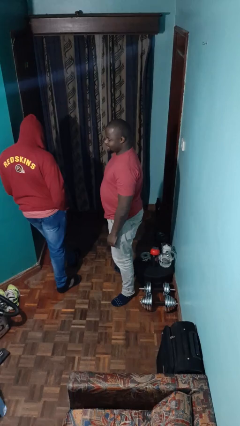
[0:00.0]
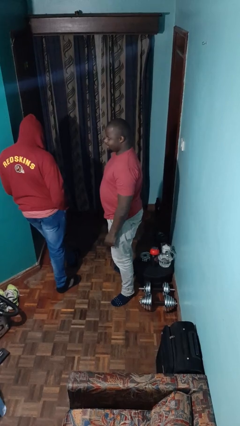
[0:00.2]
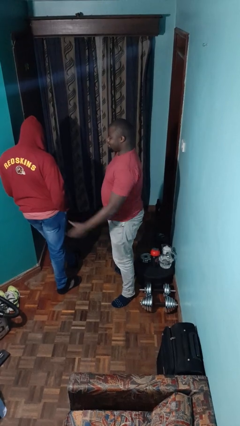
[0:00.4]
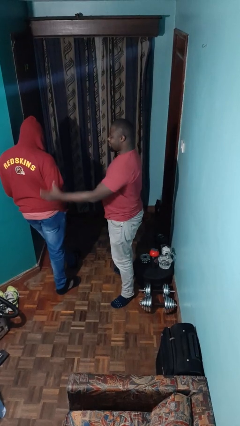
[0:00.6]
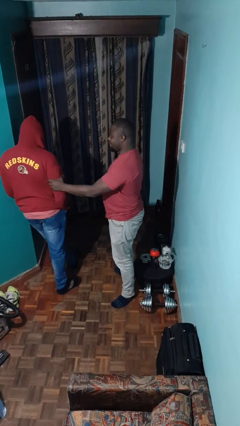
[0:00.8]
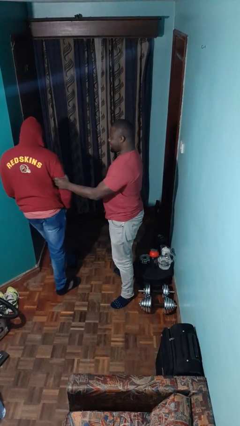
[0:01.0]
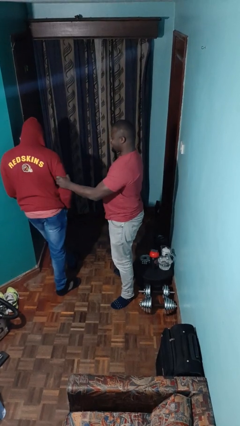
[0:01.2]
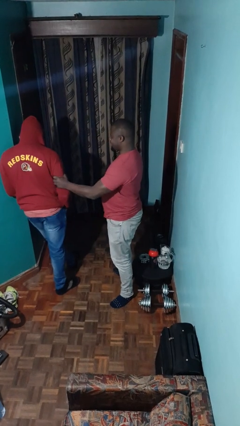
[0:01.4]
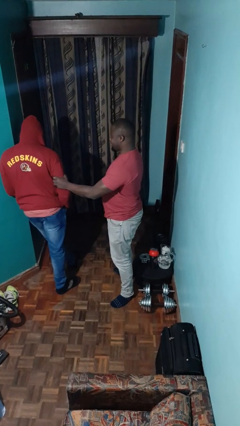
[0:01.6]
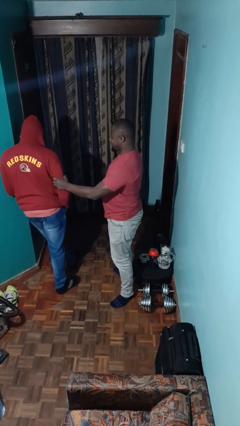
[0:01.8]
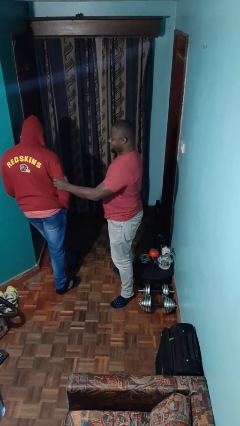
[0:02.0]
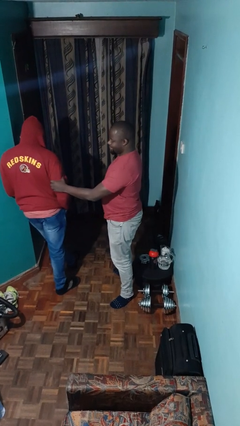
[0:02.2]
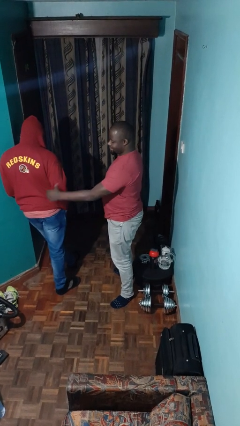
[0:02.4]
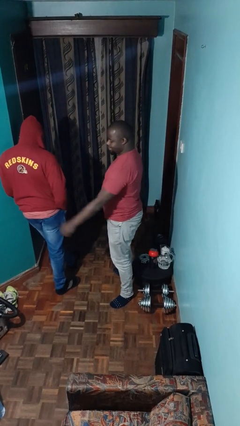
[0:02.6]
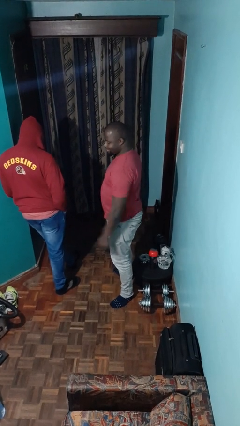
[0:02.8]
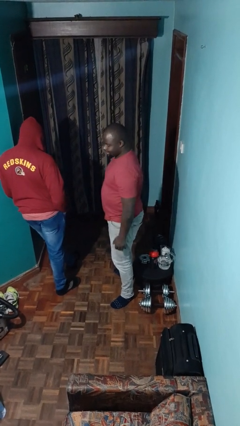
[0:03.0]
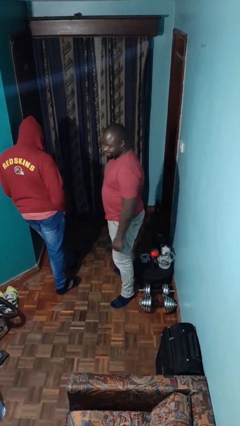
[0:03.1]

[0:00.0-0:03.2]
person grabs person by bicep

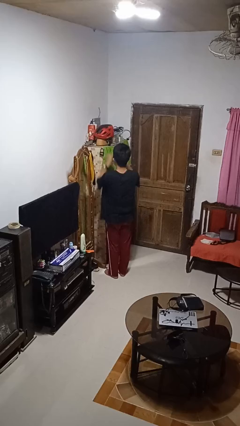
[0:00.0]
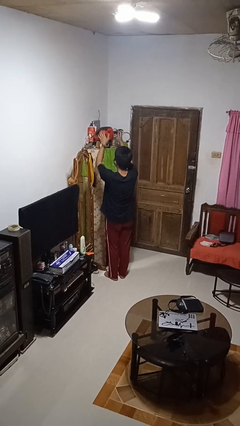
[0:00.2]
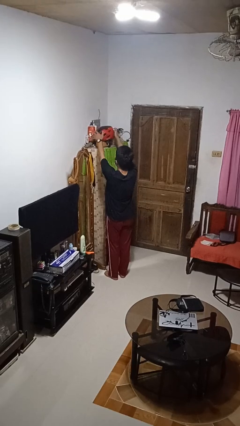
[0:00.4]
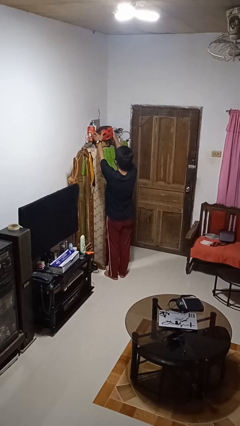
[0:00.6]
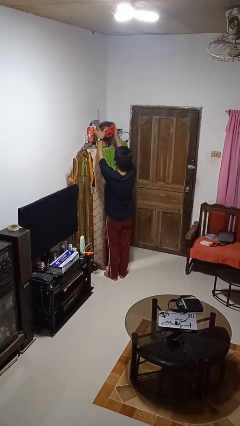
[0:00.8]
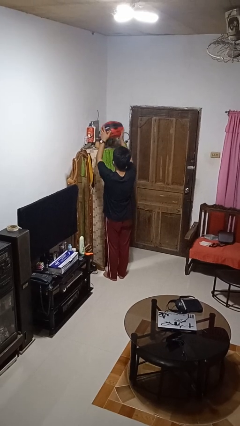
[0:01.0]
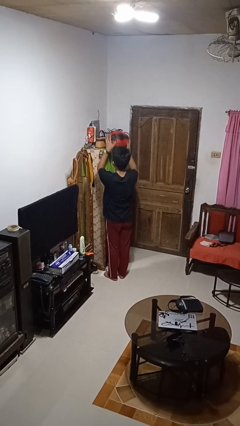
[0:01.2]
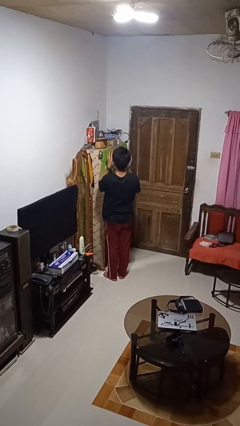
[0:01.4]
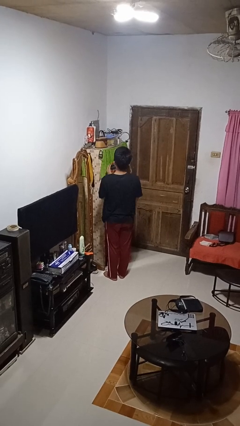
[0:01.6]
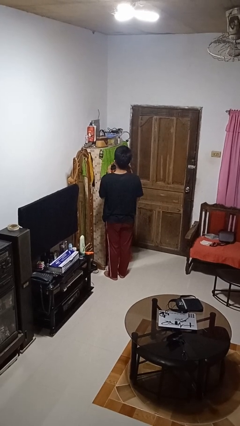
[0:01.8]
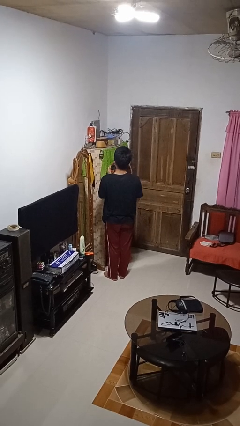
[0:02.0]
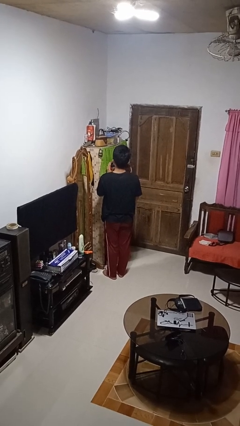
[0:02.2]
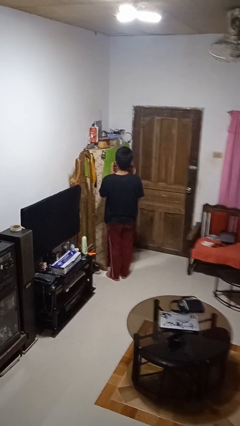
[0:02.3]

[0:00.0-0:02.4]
person picks up object from shelf

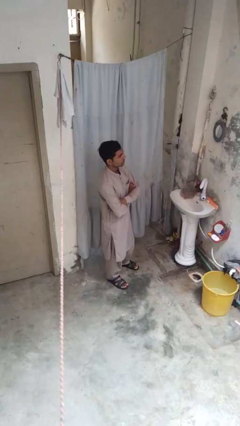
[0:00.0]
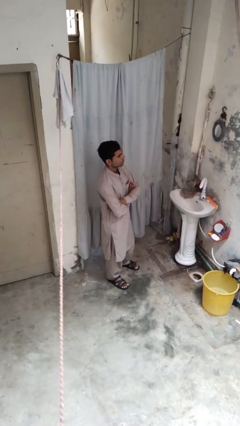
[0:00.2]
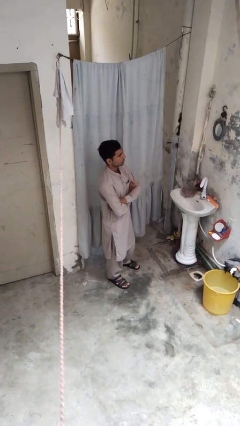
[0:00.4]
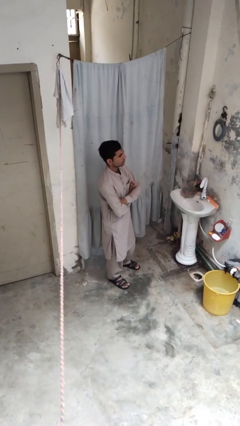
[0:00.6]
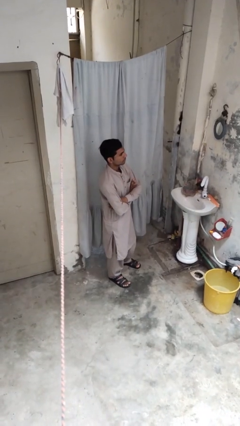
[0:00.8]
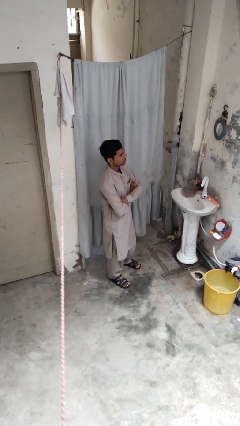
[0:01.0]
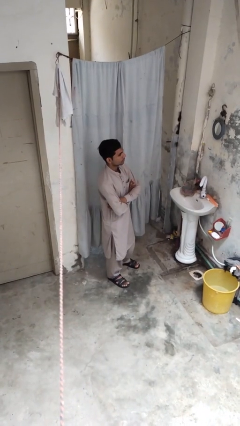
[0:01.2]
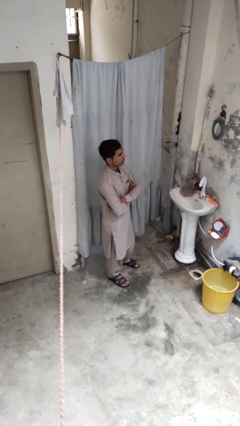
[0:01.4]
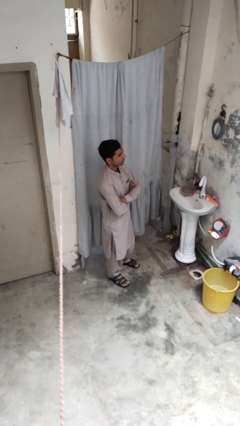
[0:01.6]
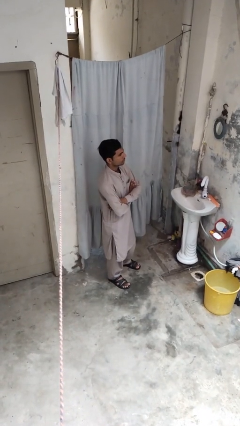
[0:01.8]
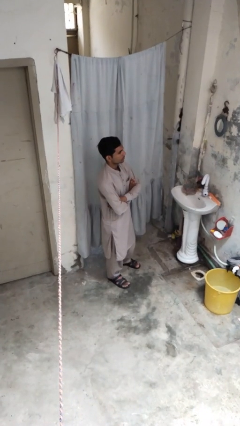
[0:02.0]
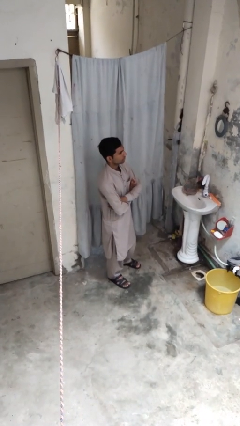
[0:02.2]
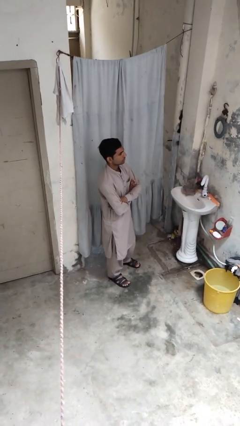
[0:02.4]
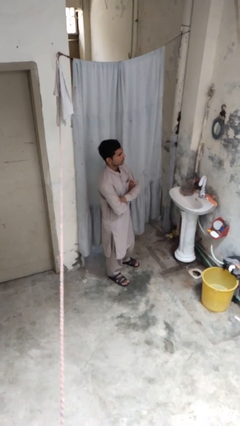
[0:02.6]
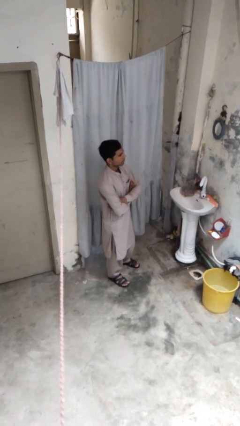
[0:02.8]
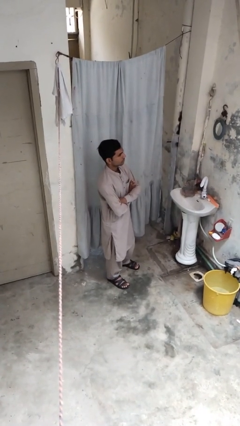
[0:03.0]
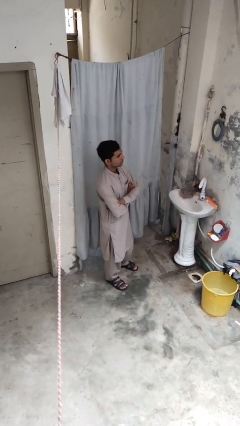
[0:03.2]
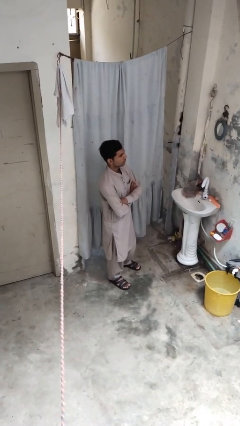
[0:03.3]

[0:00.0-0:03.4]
person crosses arms

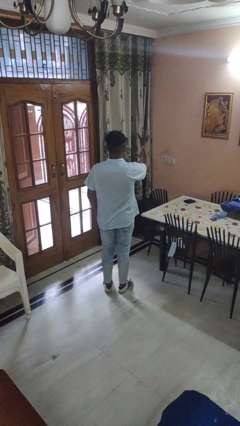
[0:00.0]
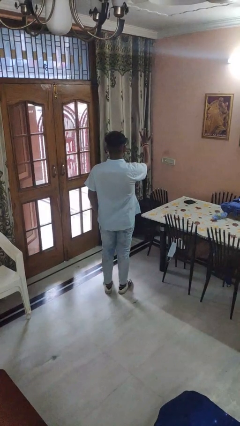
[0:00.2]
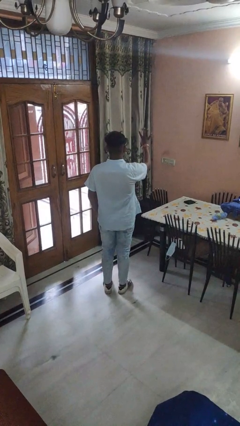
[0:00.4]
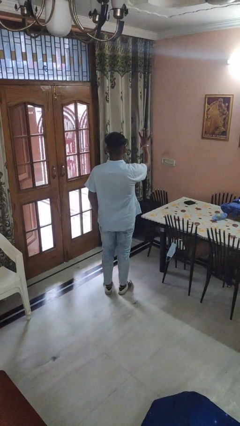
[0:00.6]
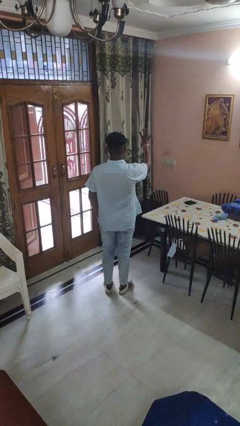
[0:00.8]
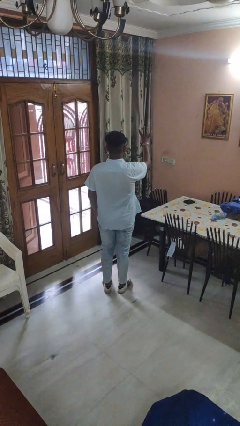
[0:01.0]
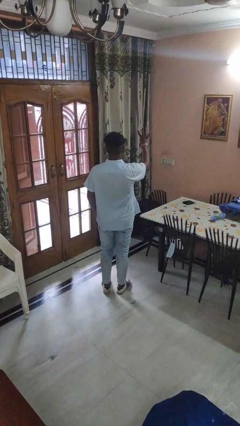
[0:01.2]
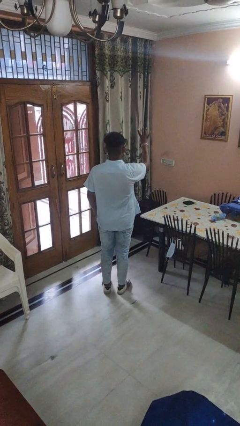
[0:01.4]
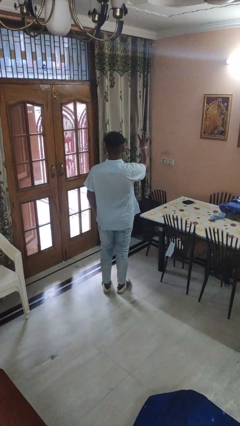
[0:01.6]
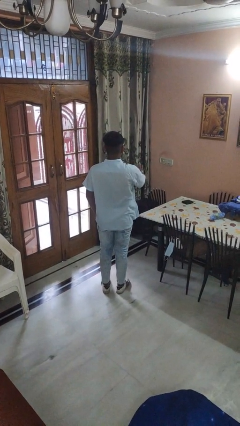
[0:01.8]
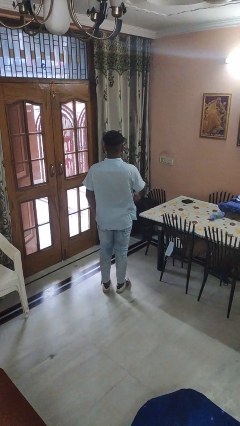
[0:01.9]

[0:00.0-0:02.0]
person gestures number four

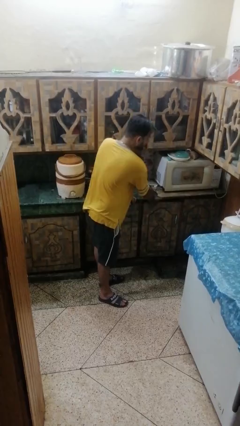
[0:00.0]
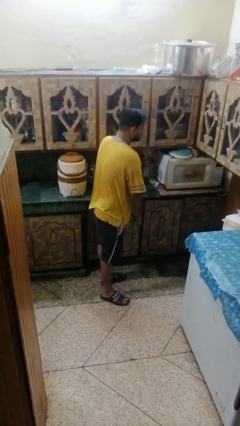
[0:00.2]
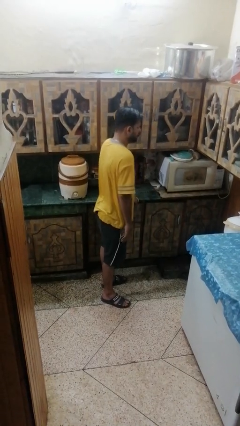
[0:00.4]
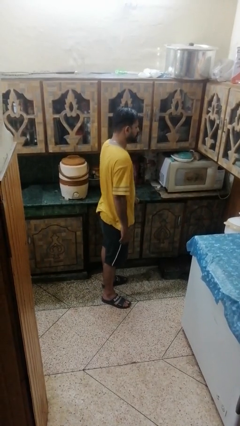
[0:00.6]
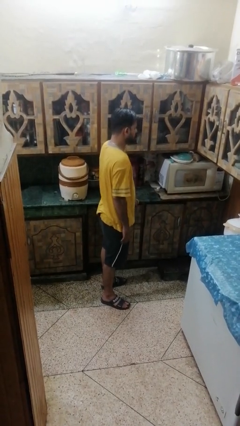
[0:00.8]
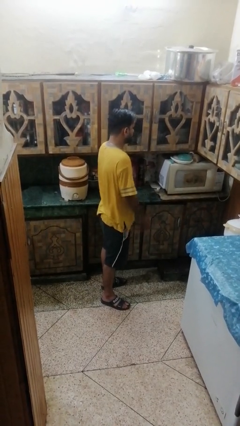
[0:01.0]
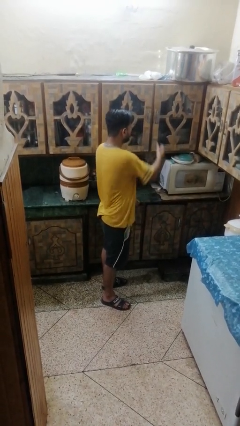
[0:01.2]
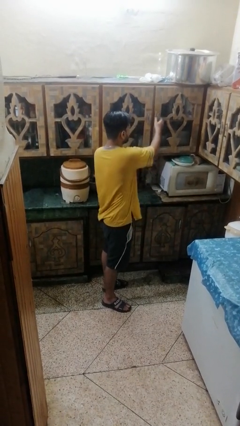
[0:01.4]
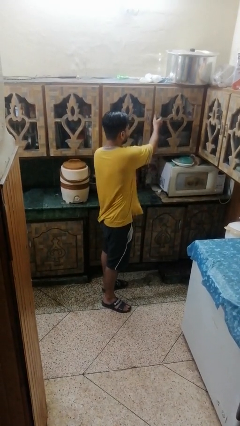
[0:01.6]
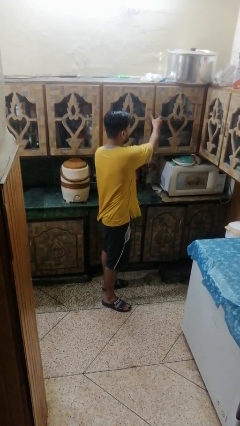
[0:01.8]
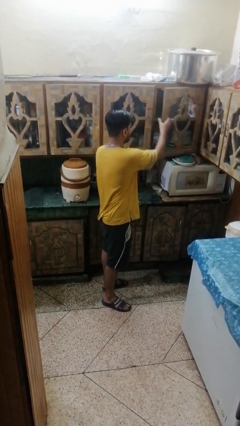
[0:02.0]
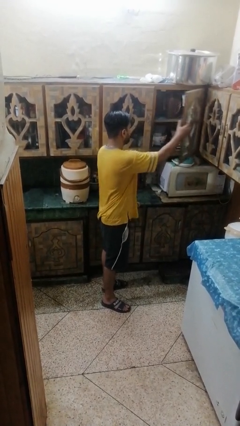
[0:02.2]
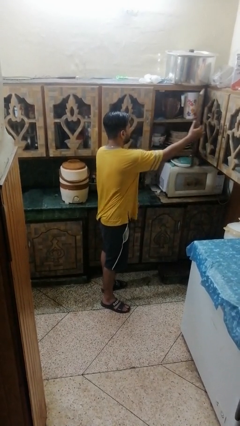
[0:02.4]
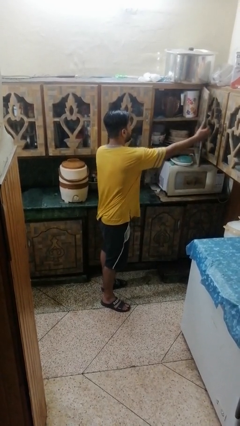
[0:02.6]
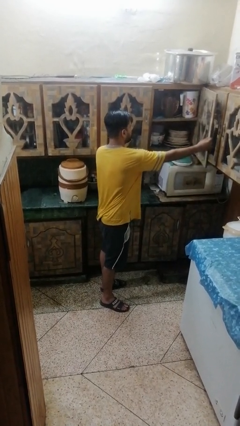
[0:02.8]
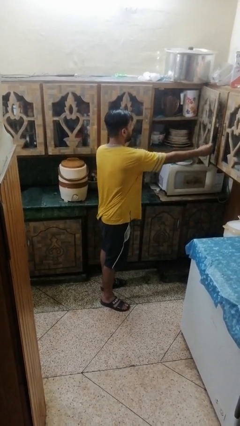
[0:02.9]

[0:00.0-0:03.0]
person closes cabinet

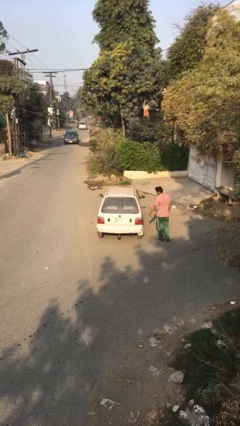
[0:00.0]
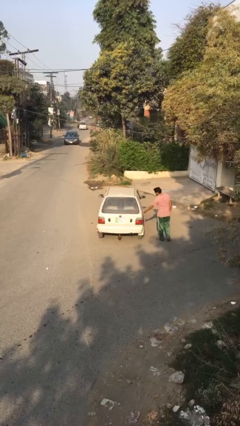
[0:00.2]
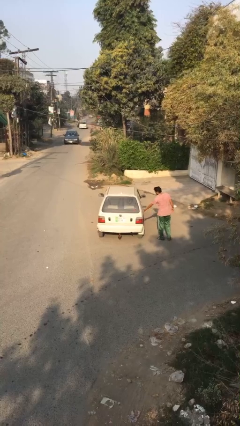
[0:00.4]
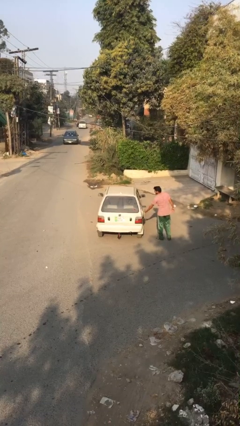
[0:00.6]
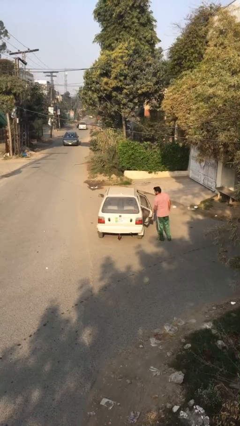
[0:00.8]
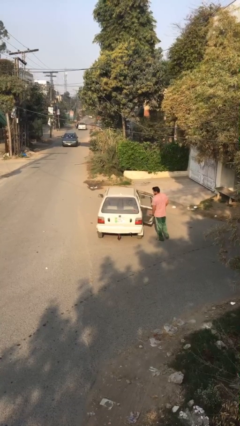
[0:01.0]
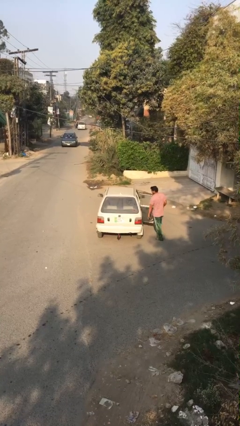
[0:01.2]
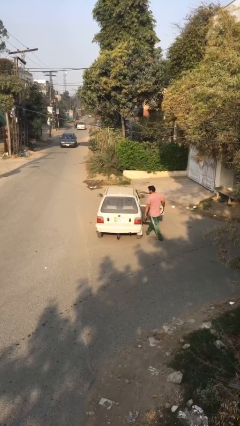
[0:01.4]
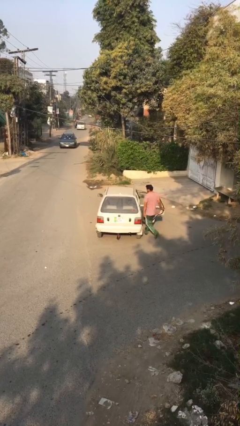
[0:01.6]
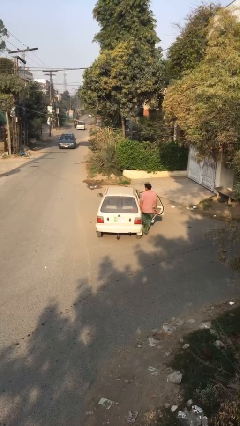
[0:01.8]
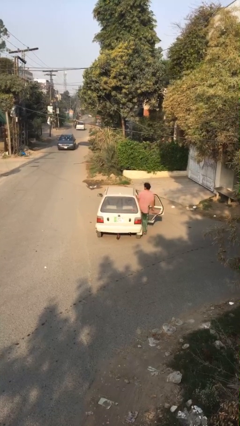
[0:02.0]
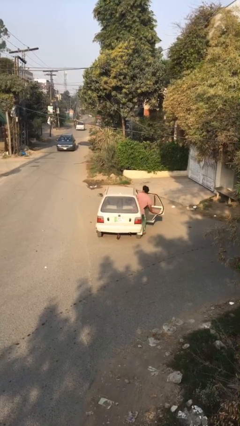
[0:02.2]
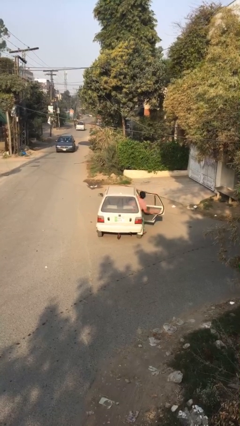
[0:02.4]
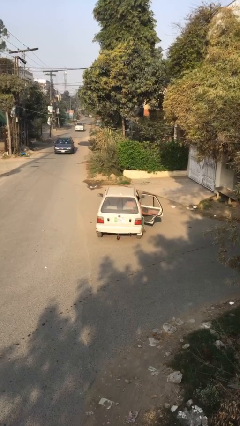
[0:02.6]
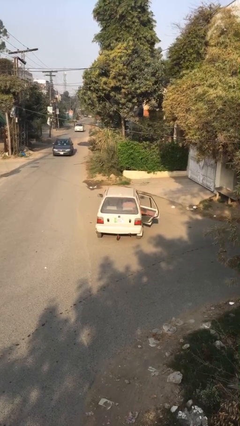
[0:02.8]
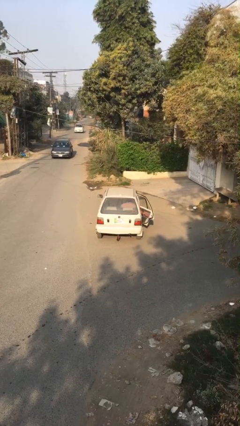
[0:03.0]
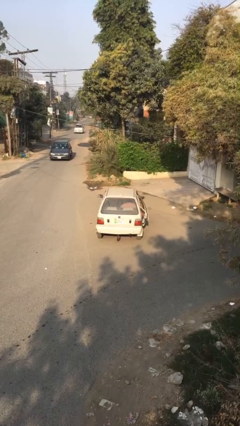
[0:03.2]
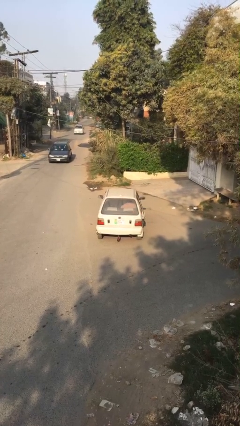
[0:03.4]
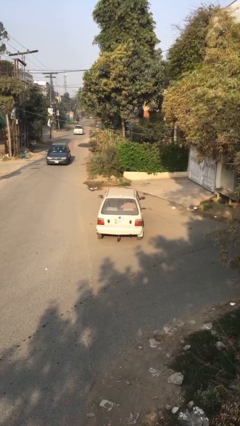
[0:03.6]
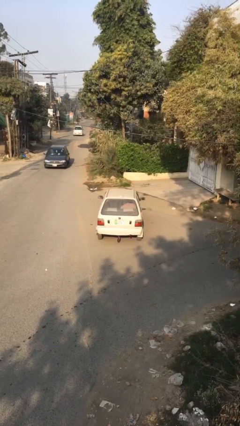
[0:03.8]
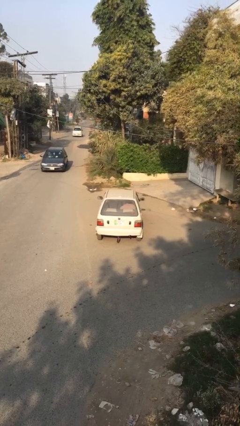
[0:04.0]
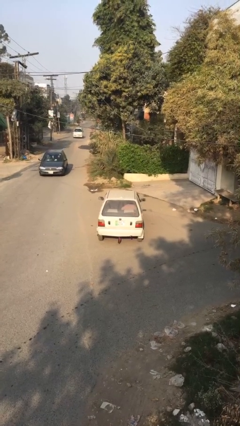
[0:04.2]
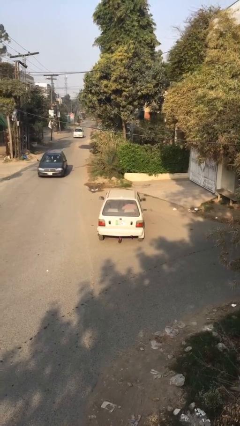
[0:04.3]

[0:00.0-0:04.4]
car picks up person
